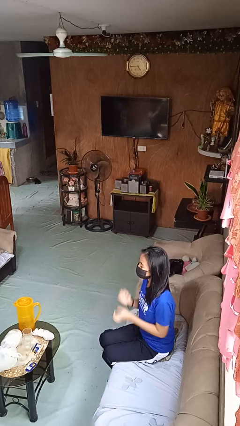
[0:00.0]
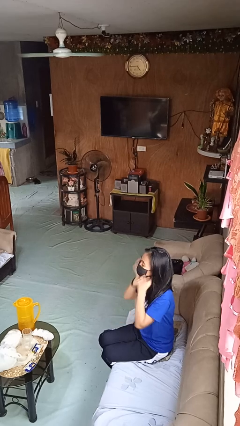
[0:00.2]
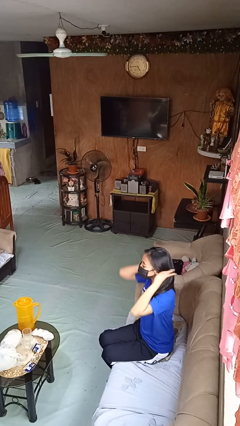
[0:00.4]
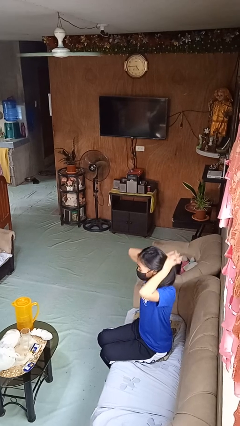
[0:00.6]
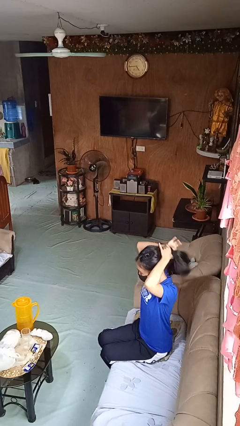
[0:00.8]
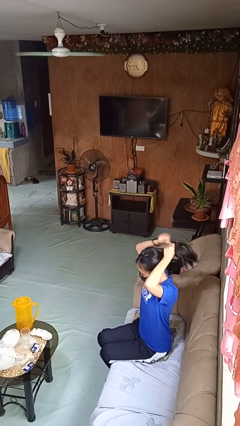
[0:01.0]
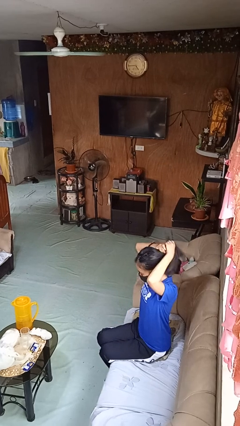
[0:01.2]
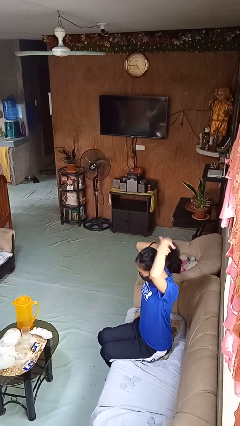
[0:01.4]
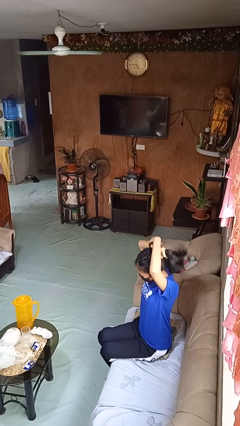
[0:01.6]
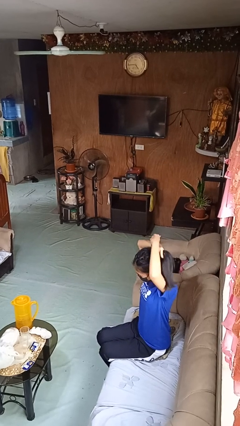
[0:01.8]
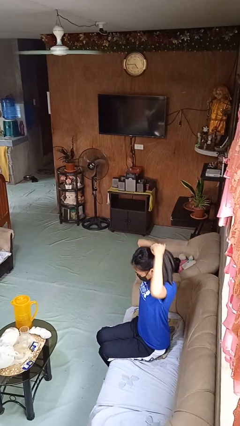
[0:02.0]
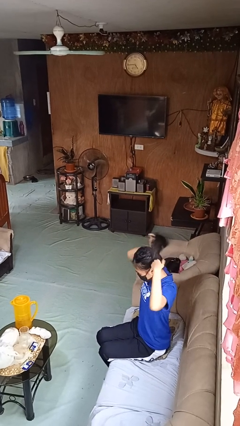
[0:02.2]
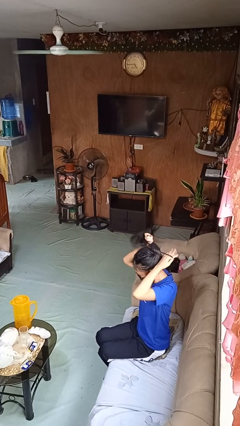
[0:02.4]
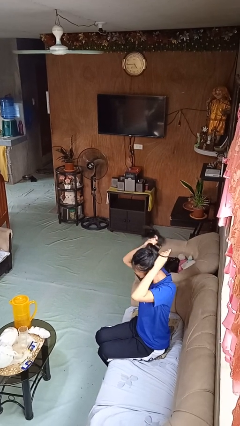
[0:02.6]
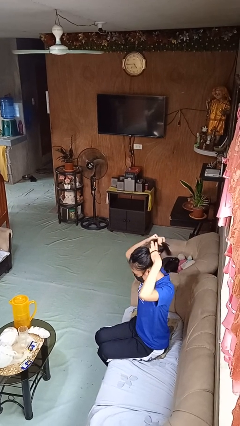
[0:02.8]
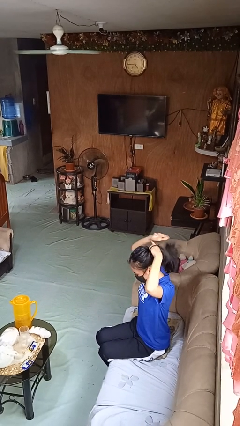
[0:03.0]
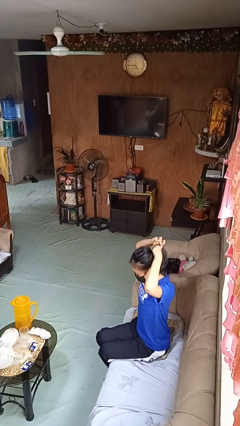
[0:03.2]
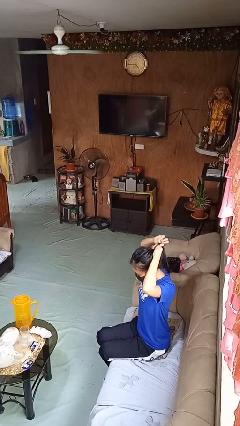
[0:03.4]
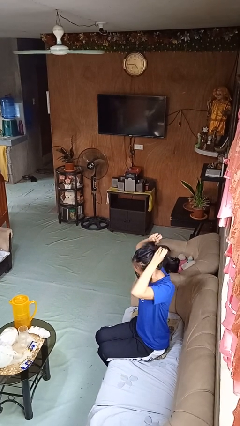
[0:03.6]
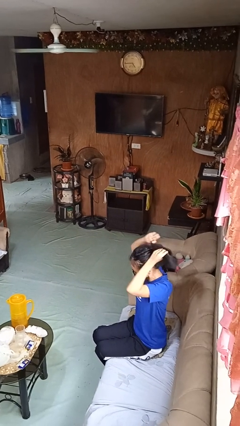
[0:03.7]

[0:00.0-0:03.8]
person puts hair in ponytail

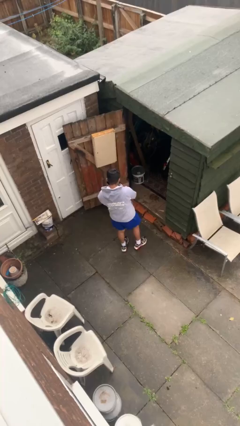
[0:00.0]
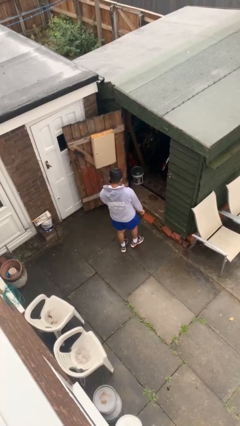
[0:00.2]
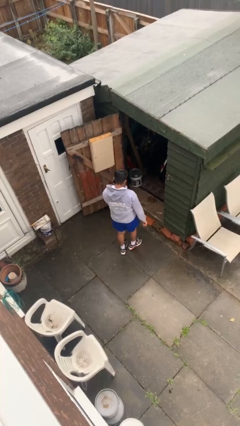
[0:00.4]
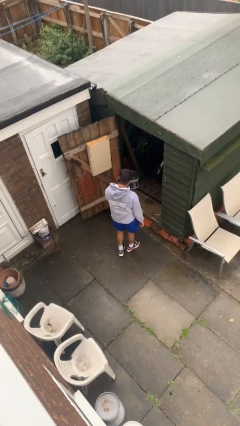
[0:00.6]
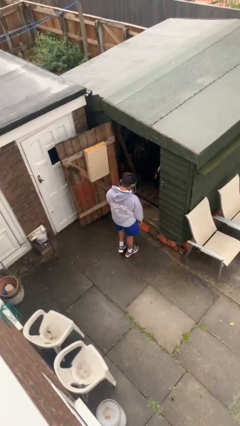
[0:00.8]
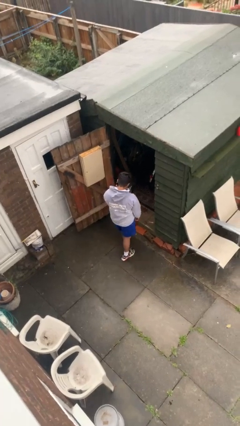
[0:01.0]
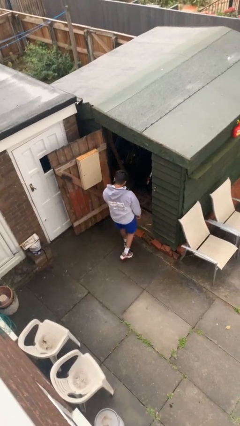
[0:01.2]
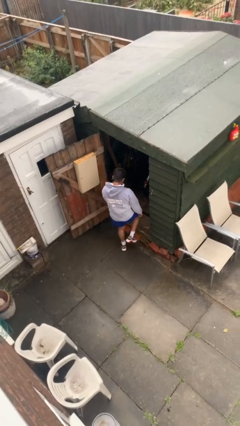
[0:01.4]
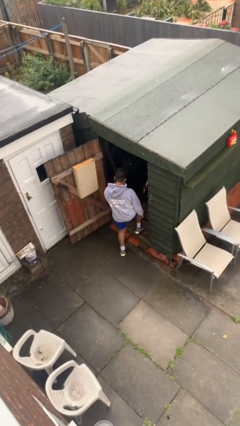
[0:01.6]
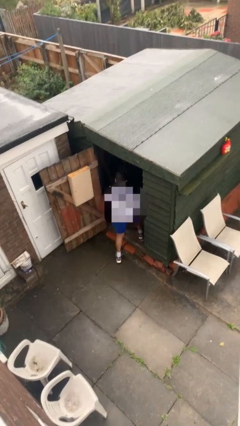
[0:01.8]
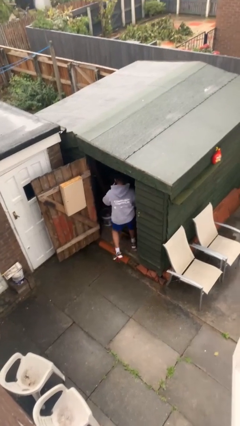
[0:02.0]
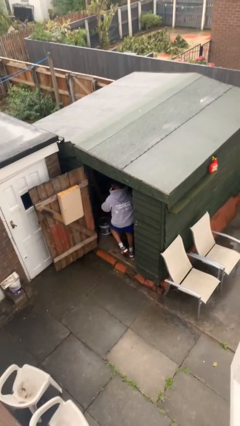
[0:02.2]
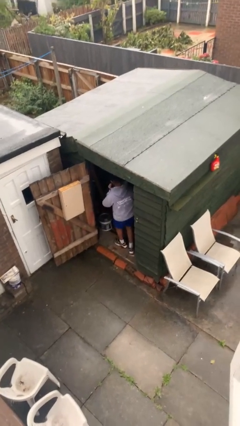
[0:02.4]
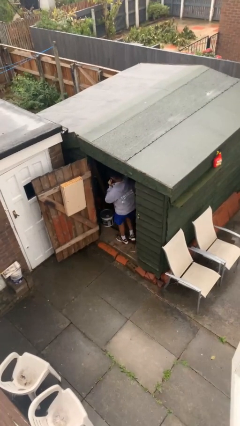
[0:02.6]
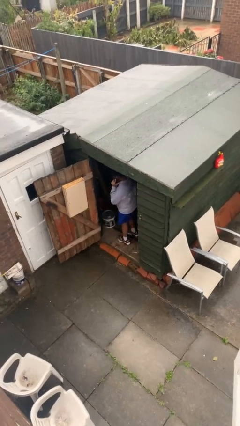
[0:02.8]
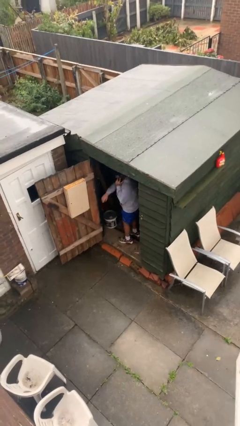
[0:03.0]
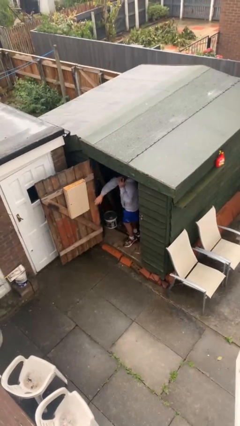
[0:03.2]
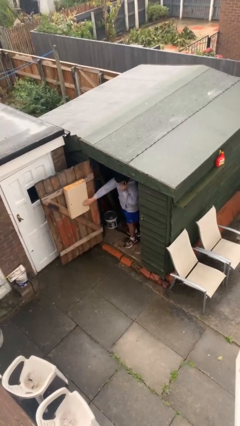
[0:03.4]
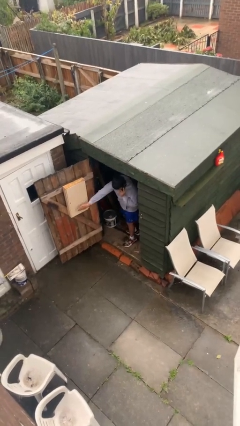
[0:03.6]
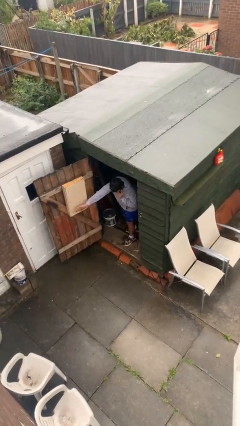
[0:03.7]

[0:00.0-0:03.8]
person exits scene through structure

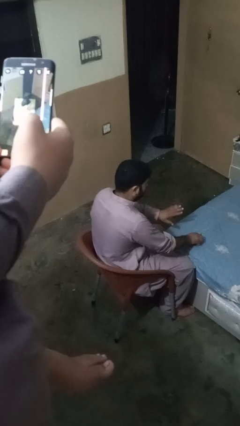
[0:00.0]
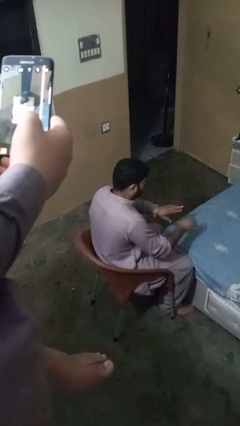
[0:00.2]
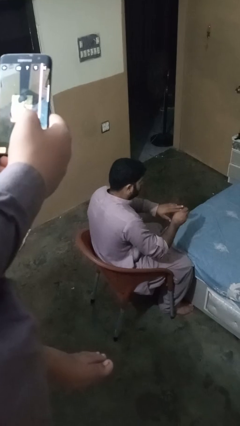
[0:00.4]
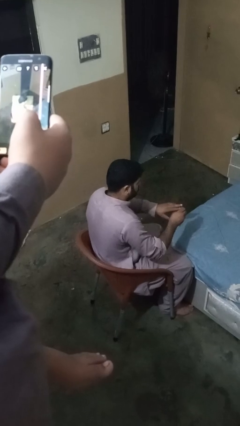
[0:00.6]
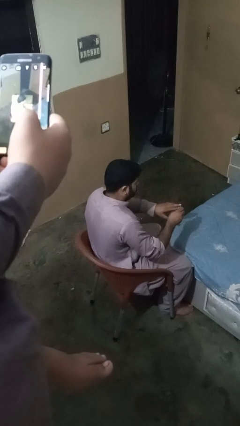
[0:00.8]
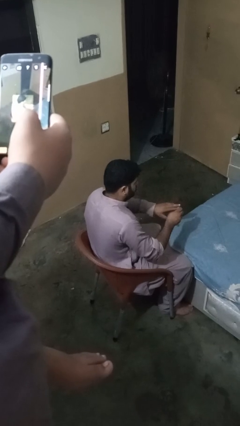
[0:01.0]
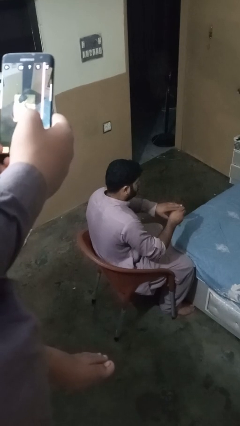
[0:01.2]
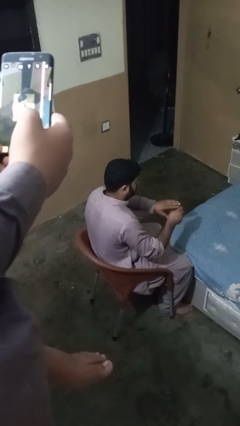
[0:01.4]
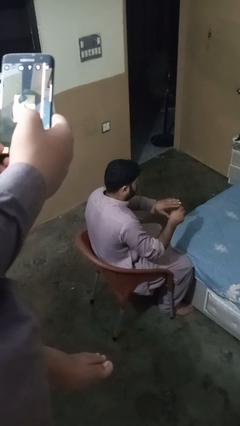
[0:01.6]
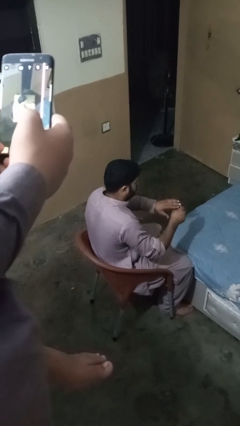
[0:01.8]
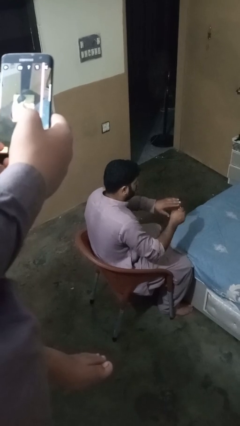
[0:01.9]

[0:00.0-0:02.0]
person files fingernails

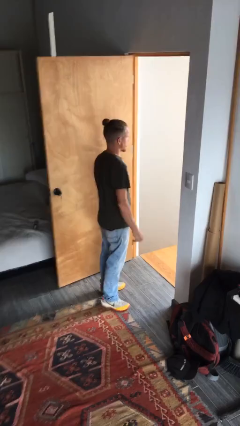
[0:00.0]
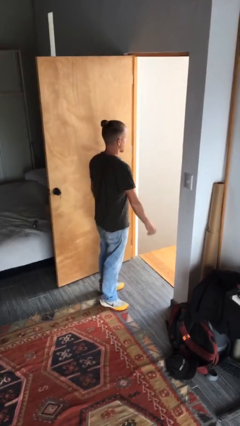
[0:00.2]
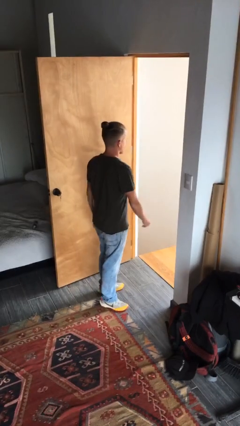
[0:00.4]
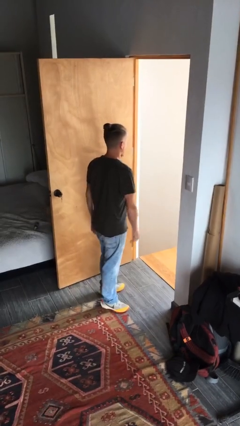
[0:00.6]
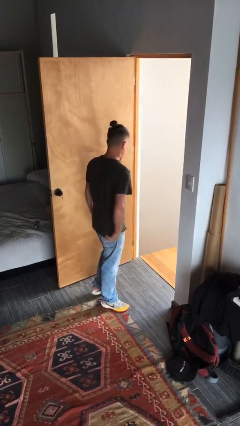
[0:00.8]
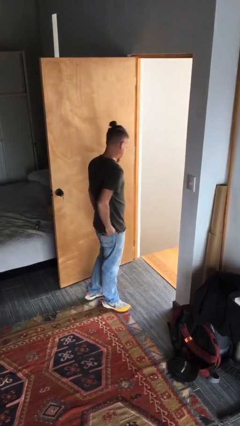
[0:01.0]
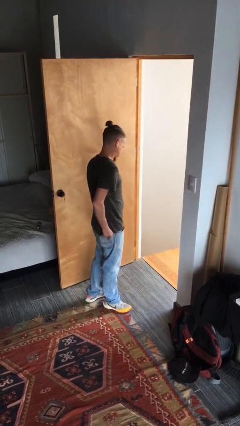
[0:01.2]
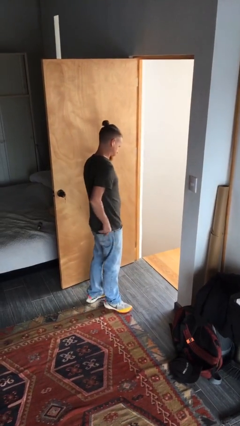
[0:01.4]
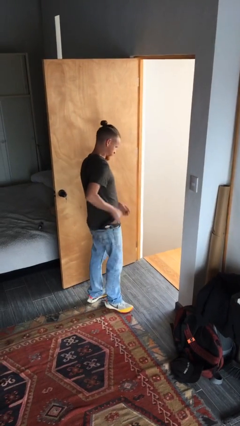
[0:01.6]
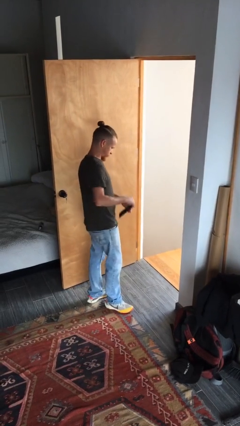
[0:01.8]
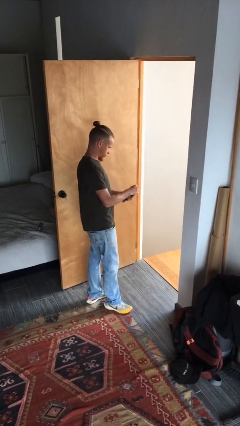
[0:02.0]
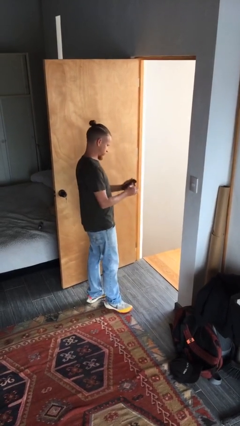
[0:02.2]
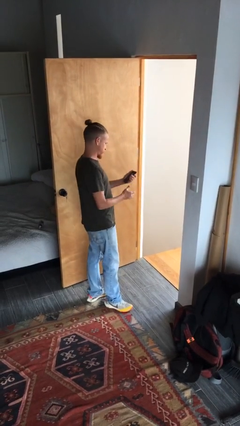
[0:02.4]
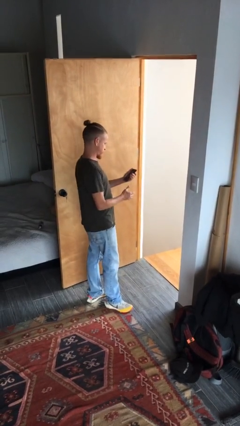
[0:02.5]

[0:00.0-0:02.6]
person takes phone from pocket

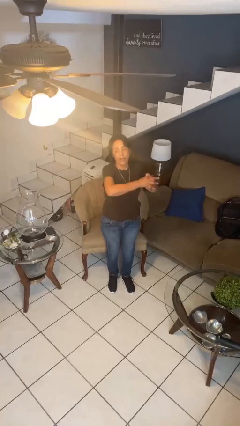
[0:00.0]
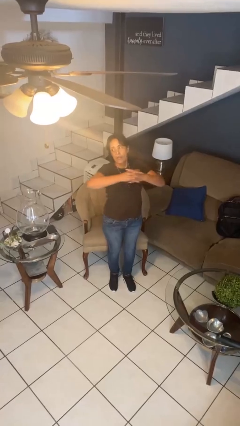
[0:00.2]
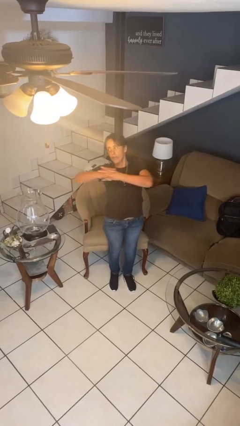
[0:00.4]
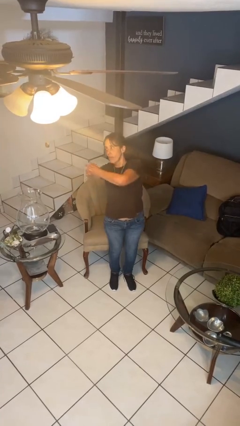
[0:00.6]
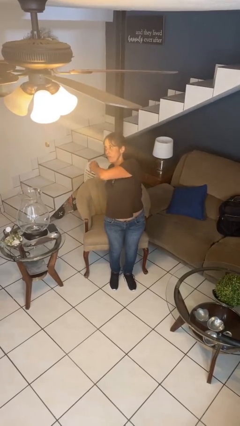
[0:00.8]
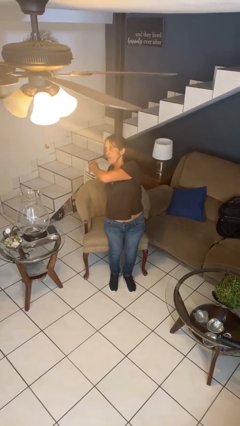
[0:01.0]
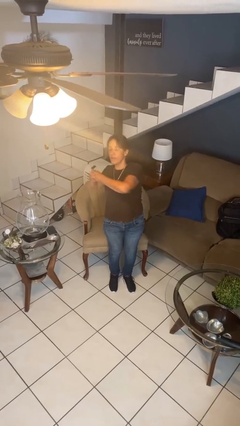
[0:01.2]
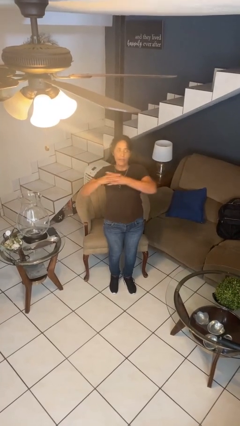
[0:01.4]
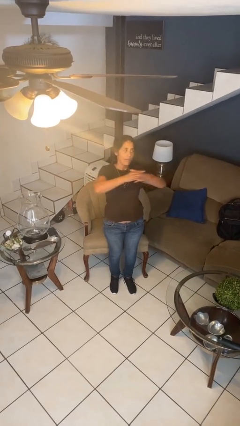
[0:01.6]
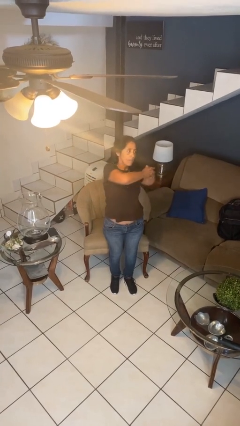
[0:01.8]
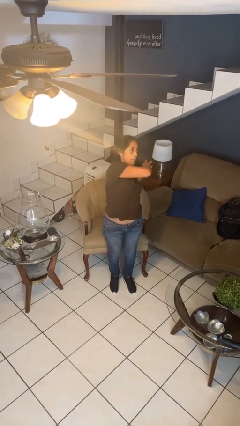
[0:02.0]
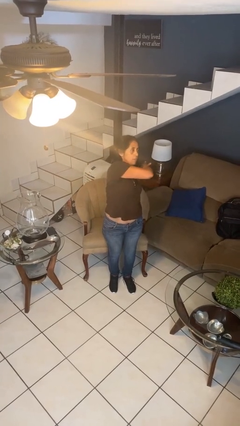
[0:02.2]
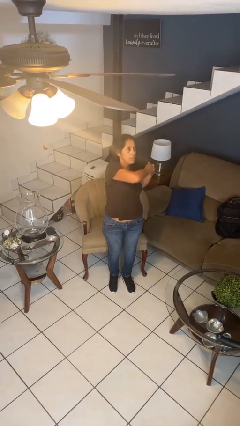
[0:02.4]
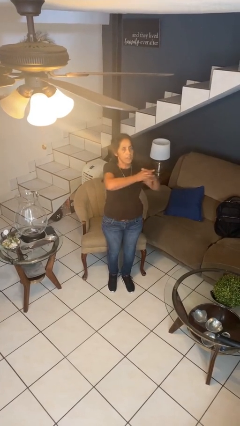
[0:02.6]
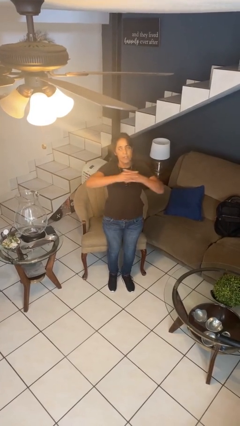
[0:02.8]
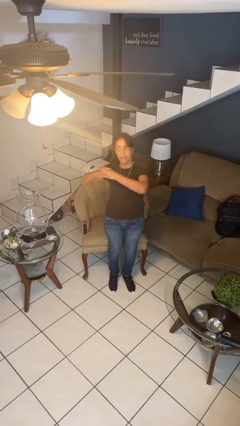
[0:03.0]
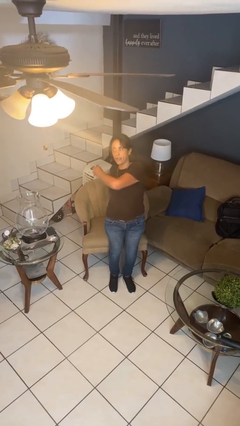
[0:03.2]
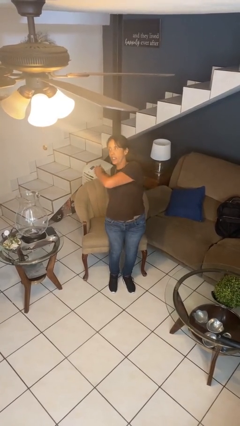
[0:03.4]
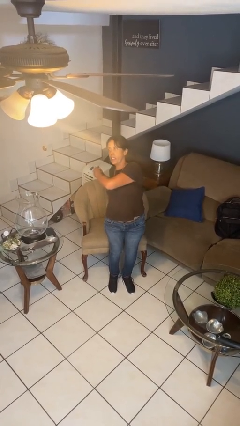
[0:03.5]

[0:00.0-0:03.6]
person stretches arms to side

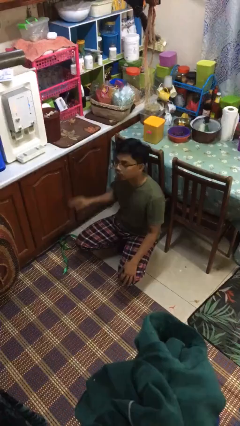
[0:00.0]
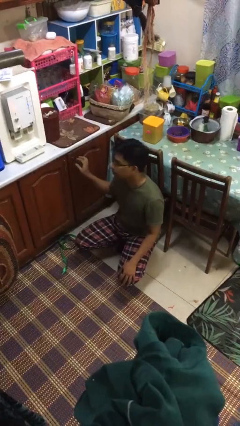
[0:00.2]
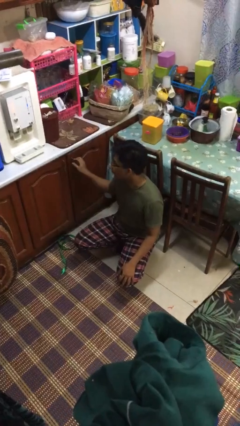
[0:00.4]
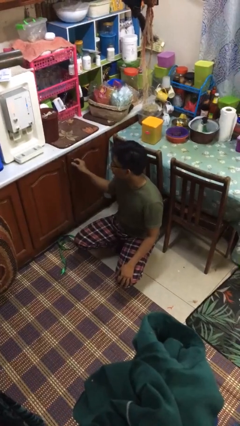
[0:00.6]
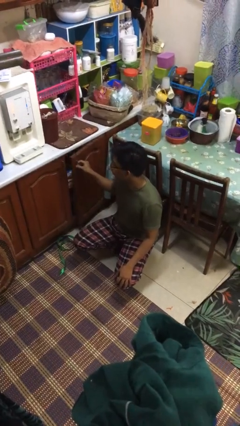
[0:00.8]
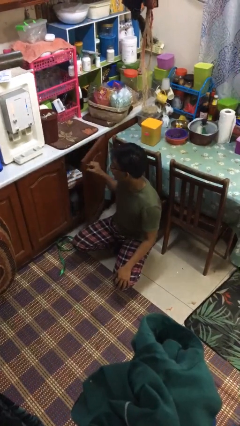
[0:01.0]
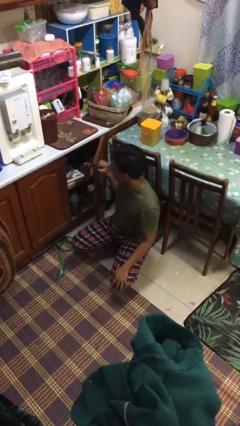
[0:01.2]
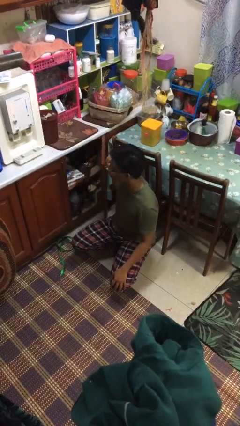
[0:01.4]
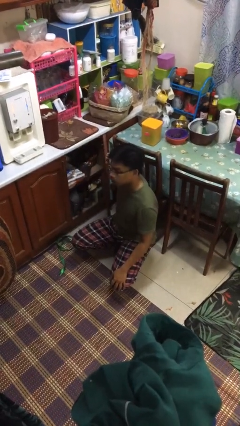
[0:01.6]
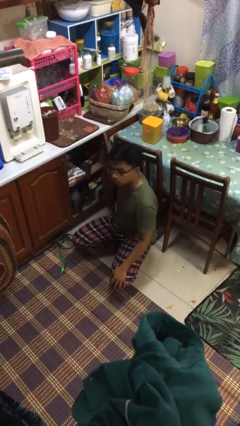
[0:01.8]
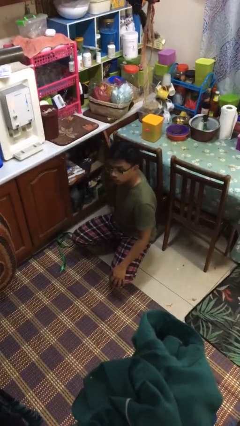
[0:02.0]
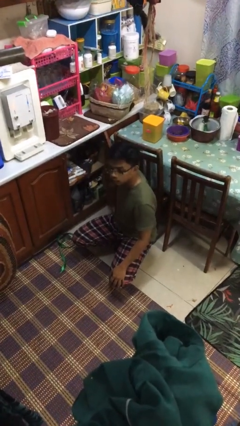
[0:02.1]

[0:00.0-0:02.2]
person opens kitchen drawer
